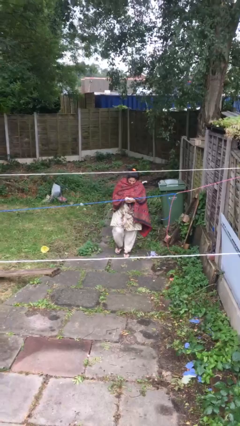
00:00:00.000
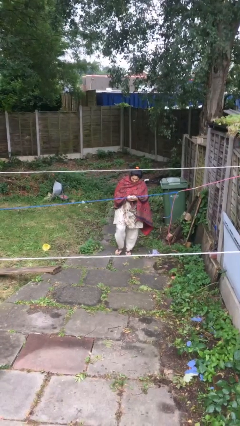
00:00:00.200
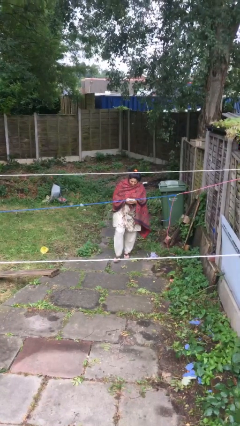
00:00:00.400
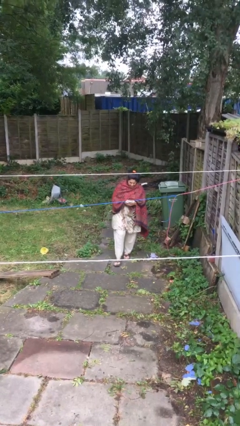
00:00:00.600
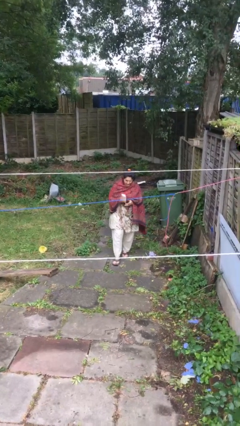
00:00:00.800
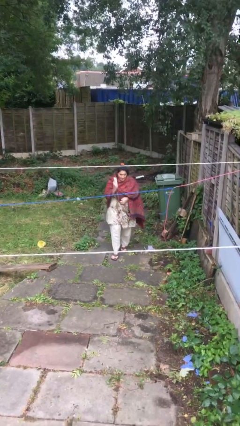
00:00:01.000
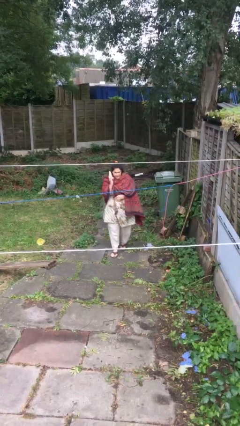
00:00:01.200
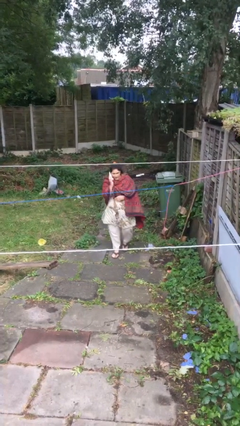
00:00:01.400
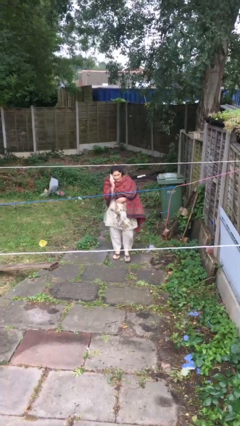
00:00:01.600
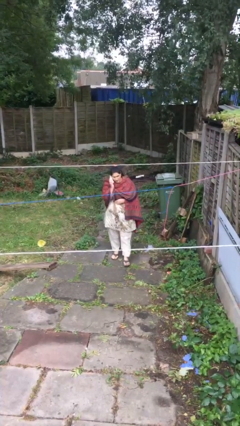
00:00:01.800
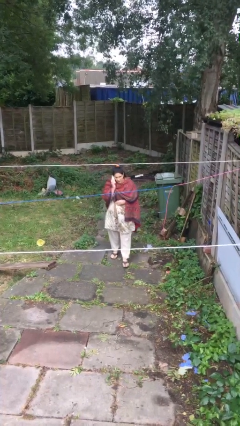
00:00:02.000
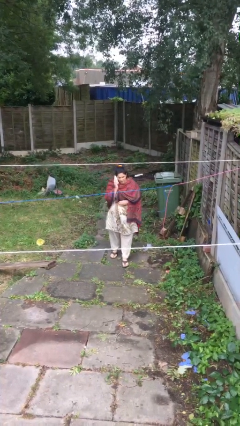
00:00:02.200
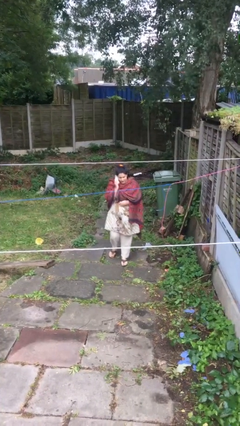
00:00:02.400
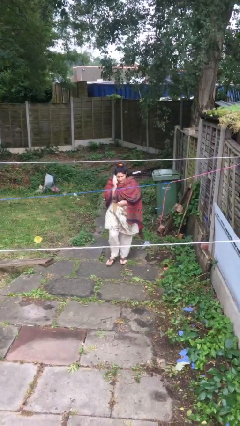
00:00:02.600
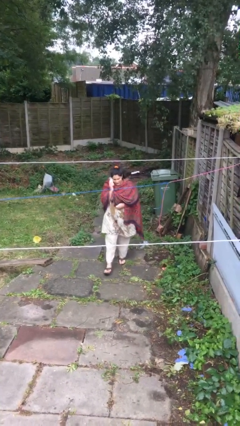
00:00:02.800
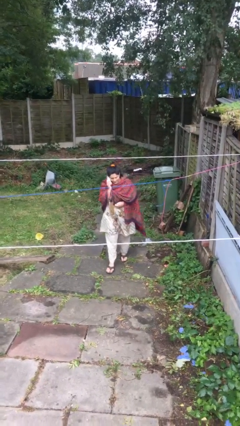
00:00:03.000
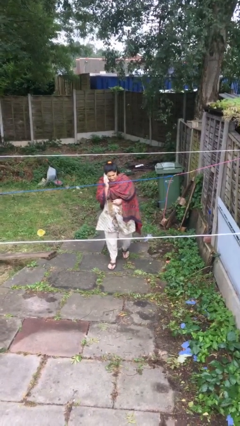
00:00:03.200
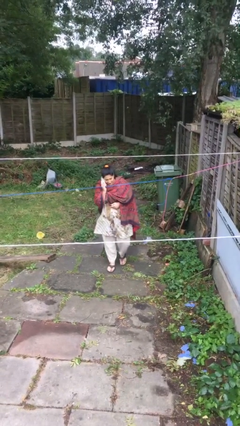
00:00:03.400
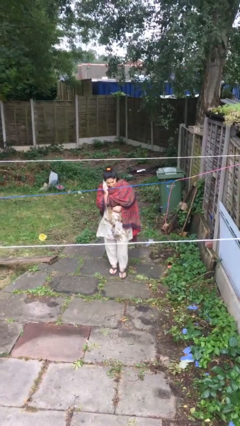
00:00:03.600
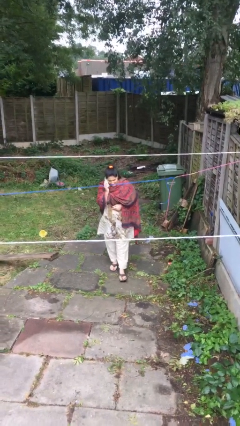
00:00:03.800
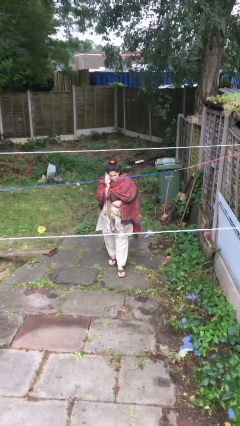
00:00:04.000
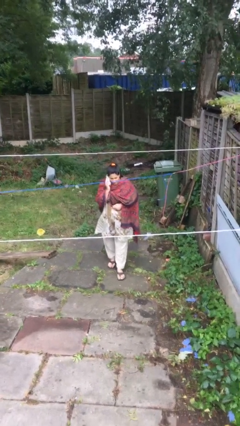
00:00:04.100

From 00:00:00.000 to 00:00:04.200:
person talks on phone

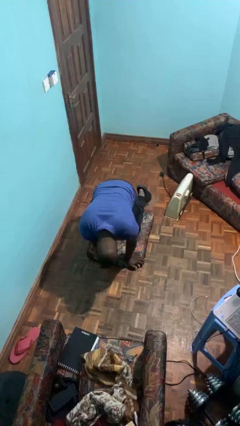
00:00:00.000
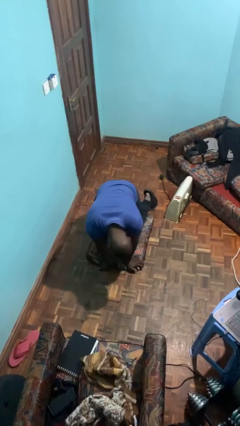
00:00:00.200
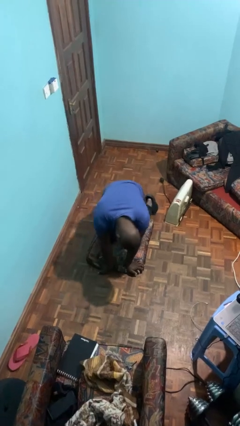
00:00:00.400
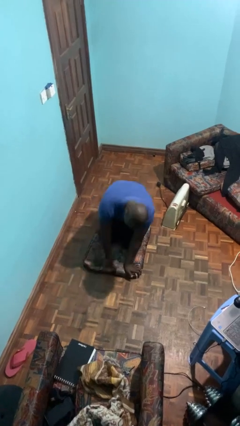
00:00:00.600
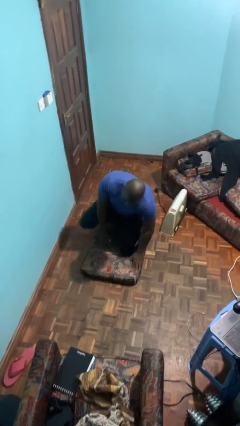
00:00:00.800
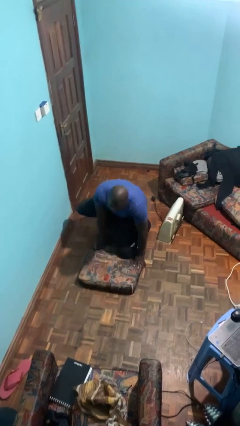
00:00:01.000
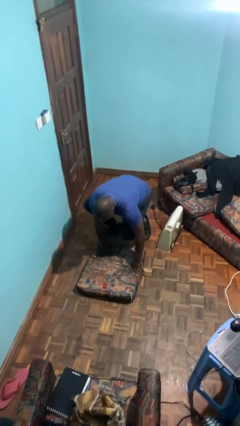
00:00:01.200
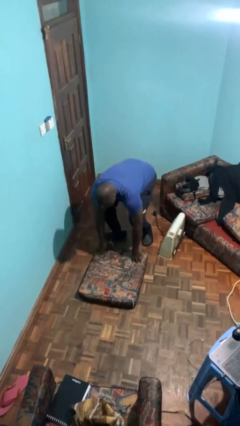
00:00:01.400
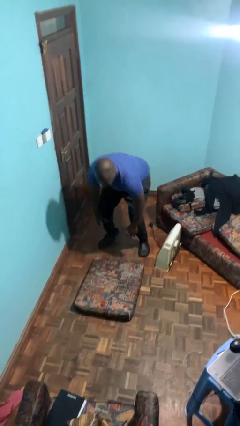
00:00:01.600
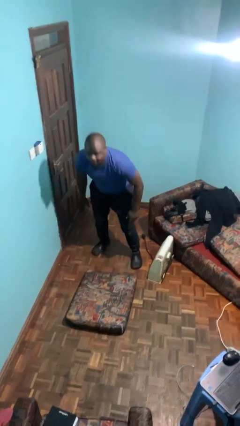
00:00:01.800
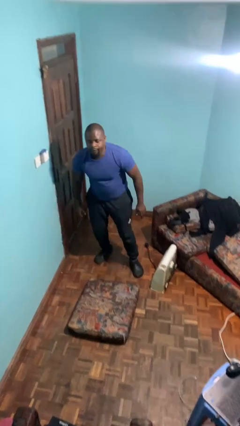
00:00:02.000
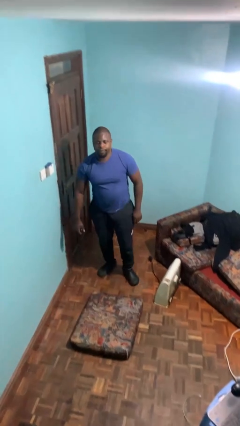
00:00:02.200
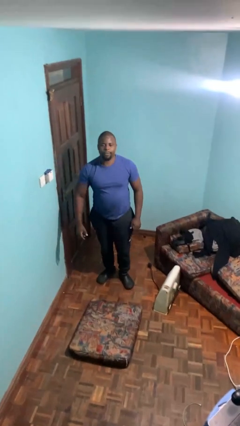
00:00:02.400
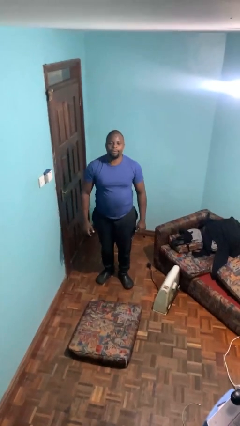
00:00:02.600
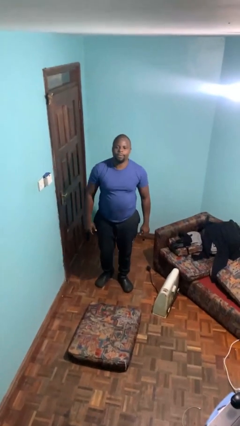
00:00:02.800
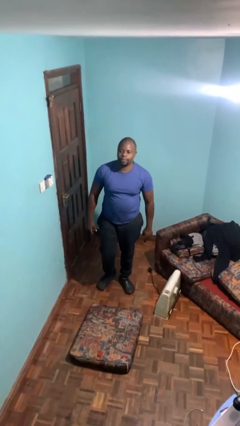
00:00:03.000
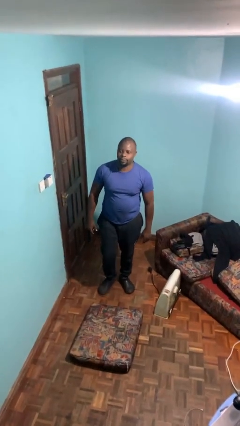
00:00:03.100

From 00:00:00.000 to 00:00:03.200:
person stands up from floor

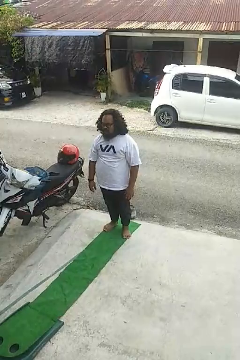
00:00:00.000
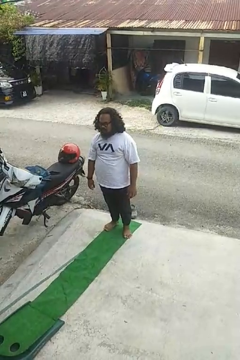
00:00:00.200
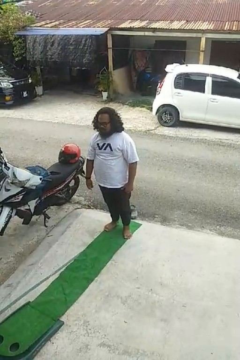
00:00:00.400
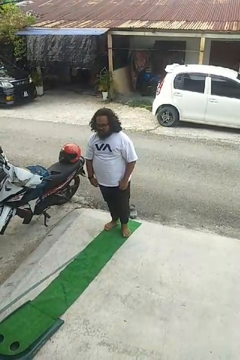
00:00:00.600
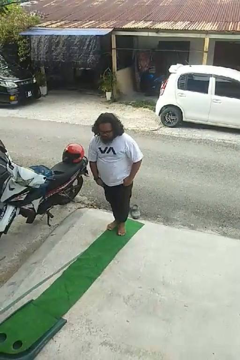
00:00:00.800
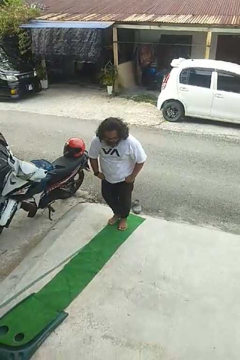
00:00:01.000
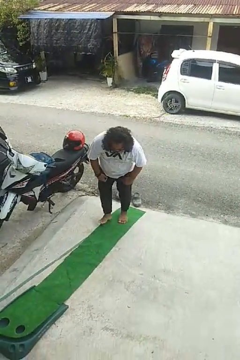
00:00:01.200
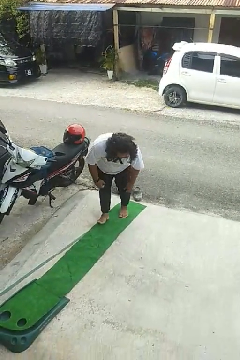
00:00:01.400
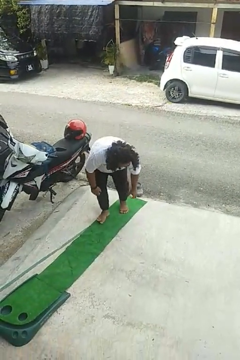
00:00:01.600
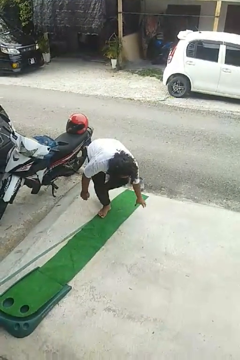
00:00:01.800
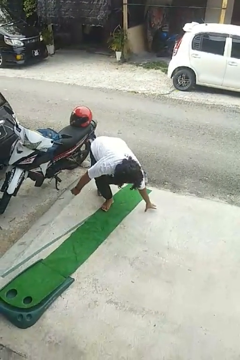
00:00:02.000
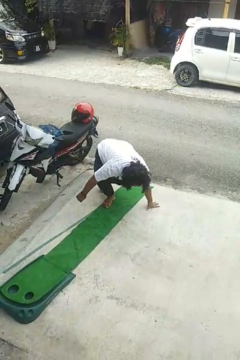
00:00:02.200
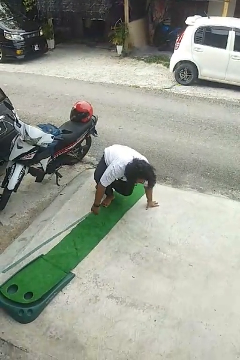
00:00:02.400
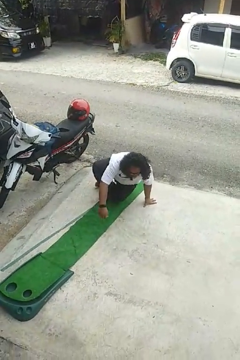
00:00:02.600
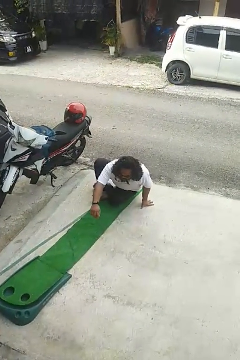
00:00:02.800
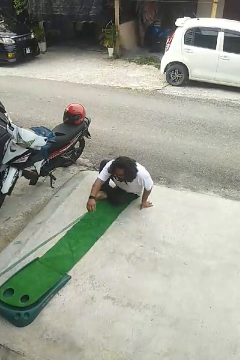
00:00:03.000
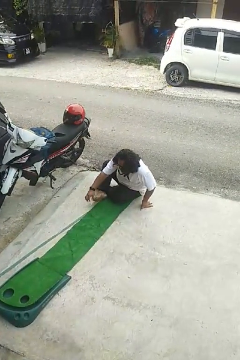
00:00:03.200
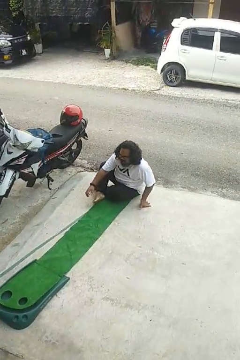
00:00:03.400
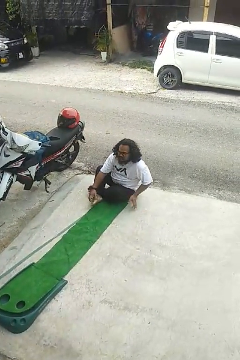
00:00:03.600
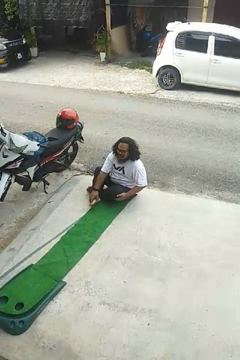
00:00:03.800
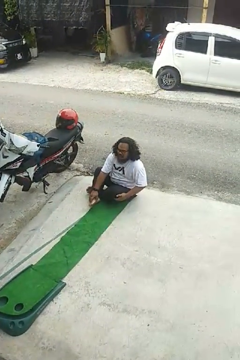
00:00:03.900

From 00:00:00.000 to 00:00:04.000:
person sits crisscross

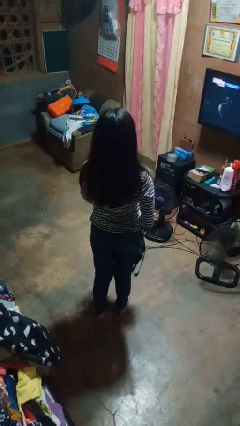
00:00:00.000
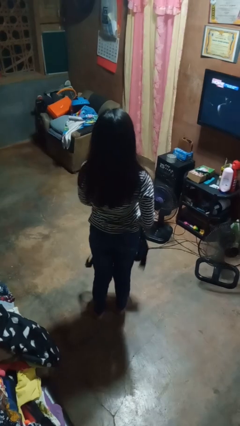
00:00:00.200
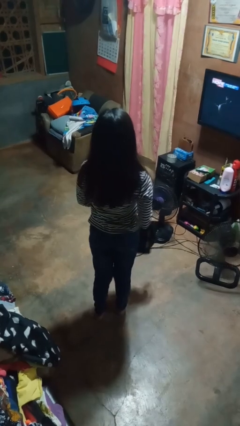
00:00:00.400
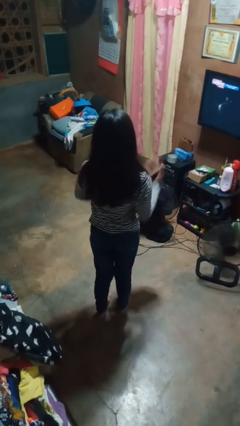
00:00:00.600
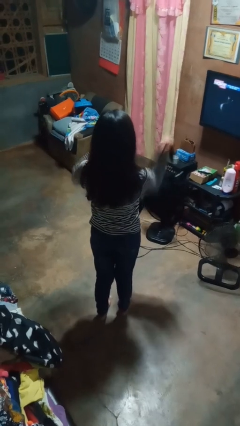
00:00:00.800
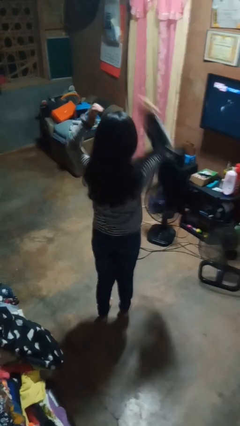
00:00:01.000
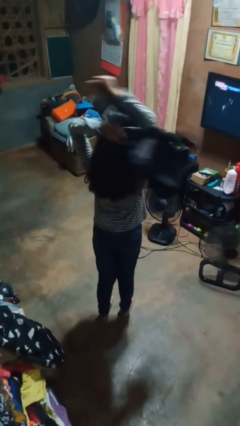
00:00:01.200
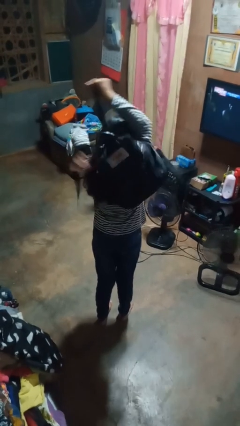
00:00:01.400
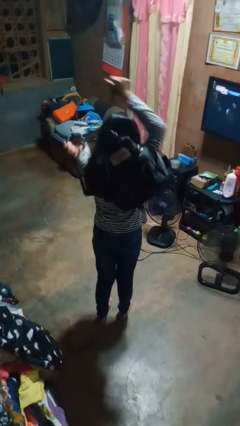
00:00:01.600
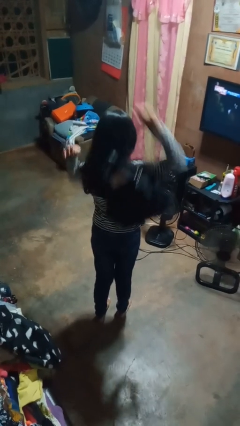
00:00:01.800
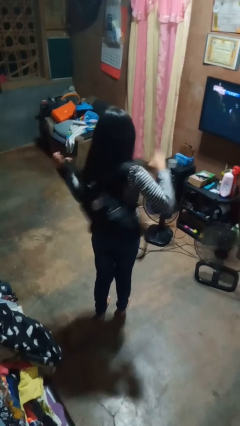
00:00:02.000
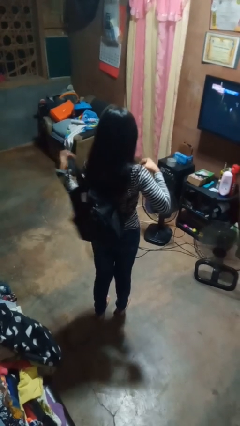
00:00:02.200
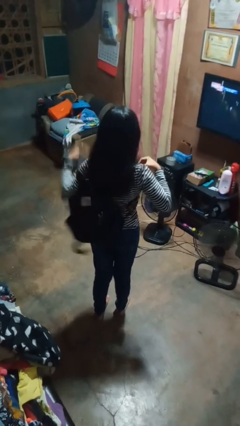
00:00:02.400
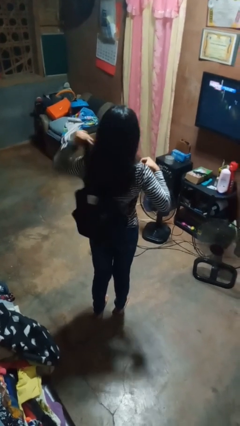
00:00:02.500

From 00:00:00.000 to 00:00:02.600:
person puts on backpack

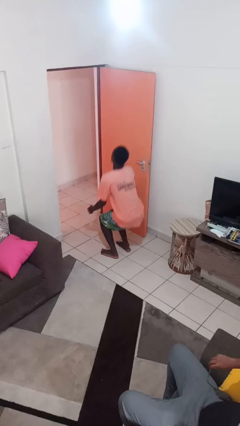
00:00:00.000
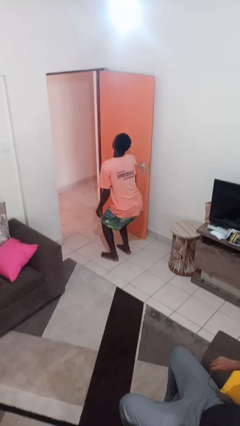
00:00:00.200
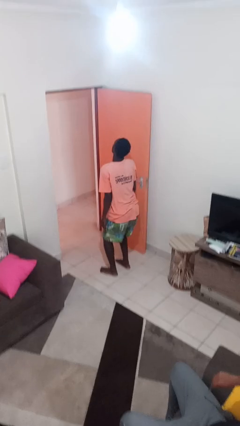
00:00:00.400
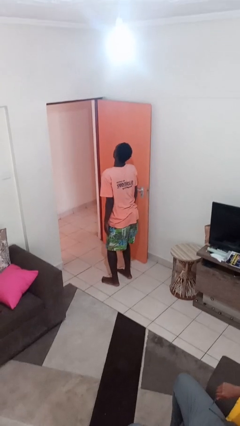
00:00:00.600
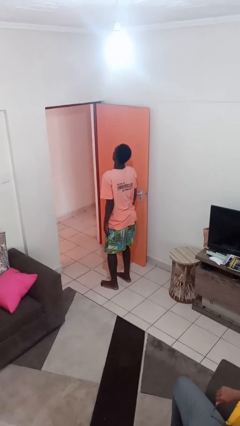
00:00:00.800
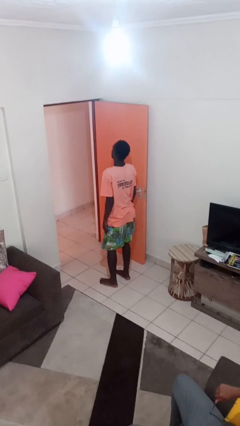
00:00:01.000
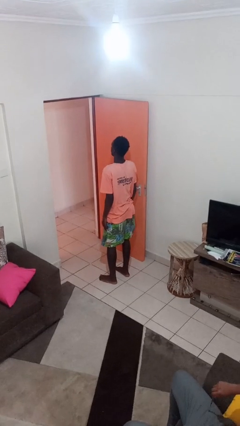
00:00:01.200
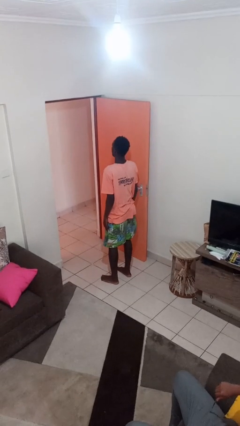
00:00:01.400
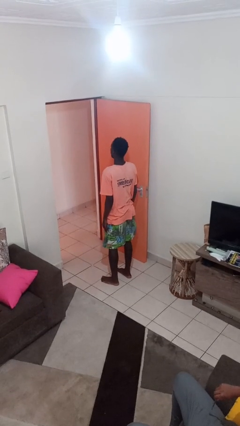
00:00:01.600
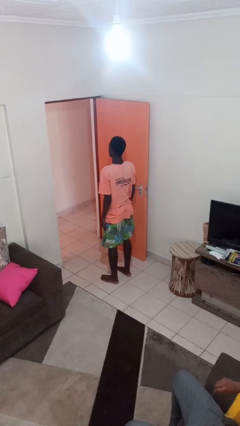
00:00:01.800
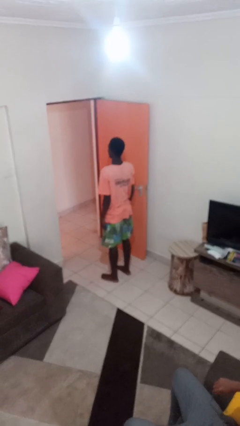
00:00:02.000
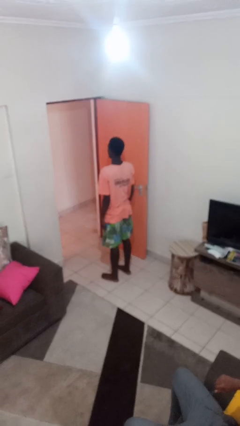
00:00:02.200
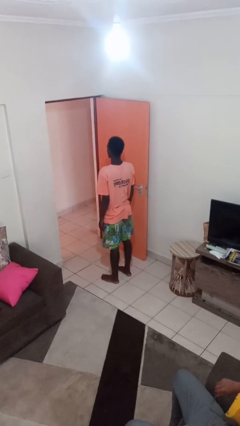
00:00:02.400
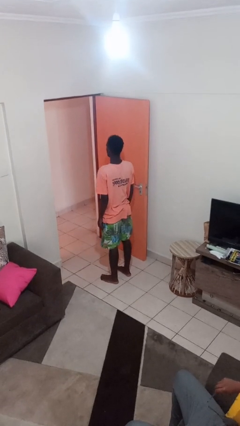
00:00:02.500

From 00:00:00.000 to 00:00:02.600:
person stands up

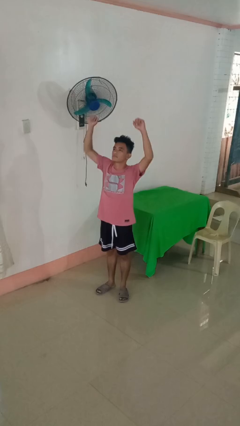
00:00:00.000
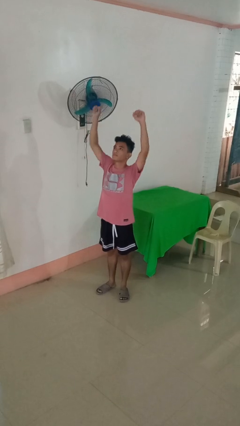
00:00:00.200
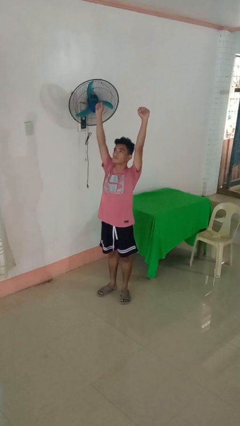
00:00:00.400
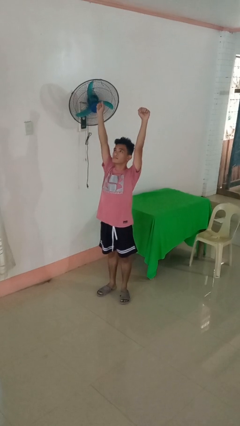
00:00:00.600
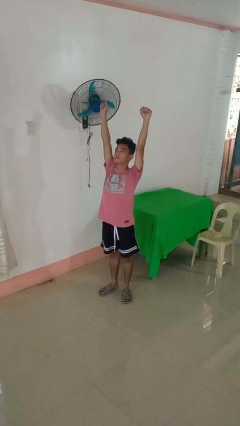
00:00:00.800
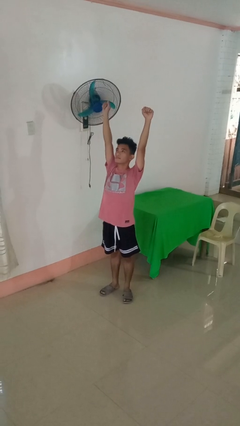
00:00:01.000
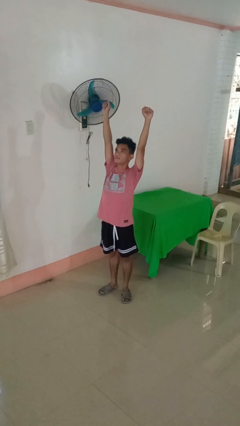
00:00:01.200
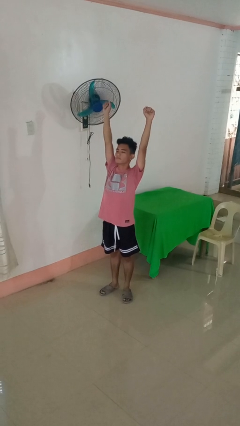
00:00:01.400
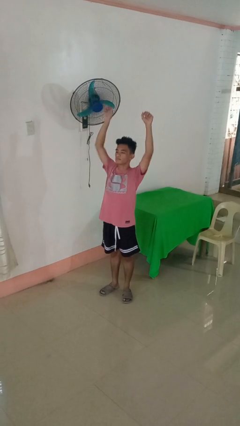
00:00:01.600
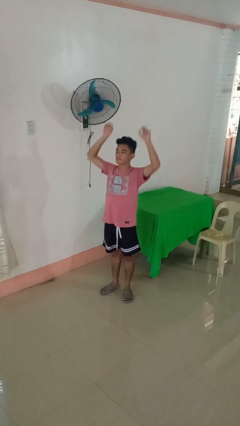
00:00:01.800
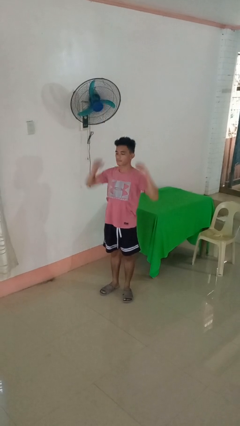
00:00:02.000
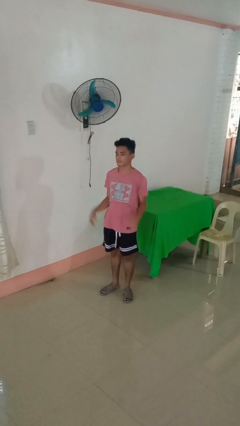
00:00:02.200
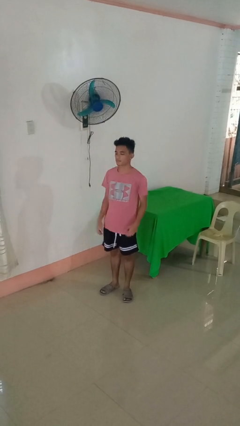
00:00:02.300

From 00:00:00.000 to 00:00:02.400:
person stretches arms over head
